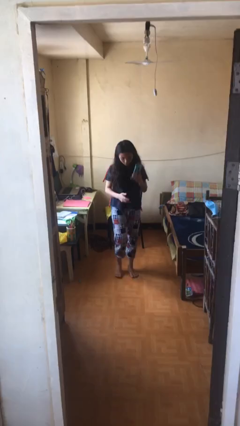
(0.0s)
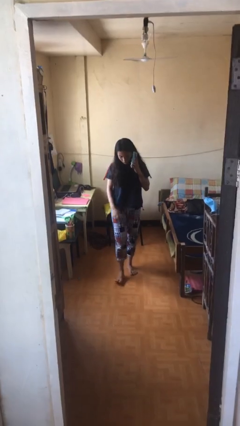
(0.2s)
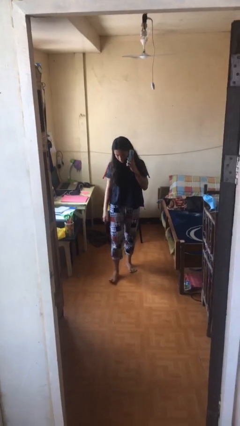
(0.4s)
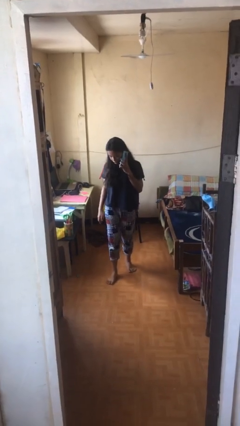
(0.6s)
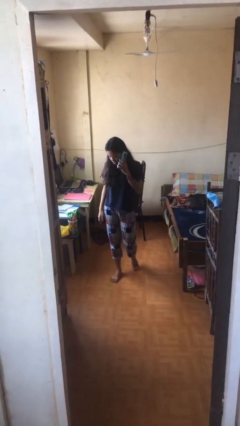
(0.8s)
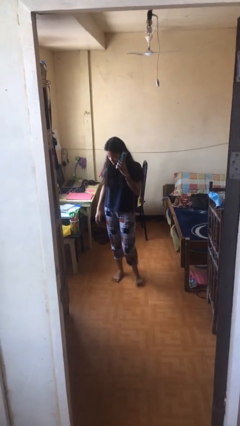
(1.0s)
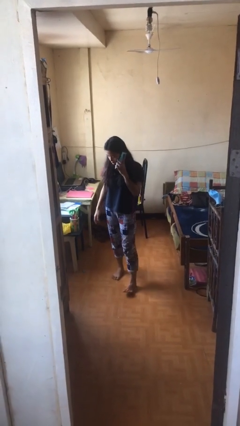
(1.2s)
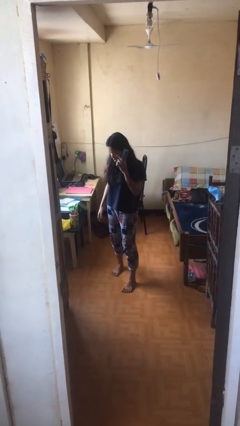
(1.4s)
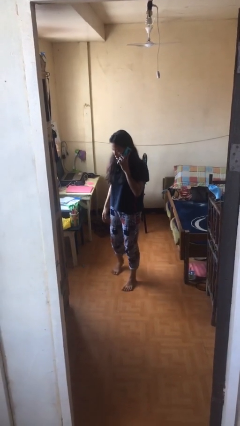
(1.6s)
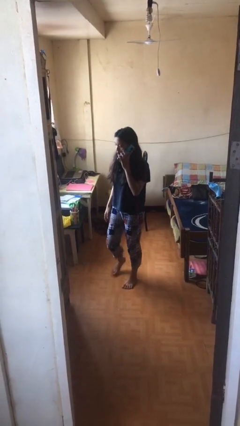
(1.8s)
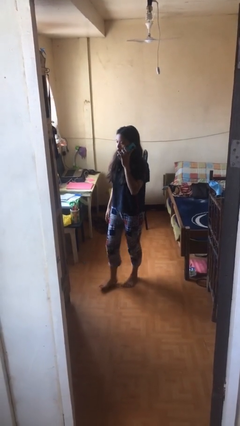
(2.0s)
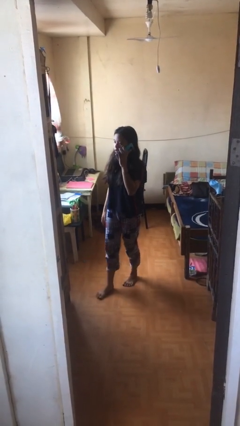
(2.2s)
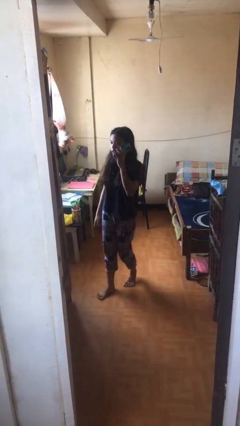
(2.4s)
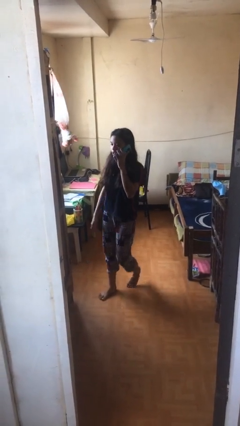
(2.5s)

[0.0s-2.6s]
person talks on phone

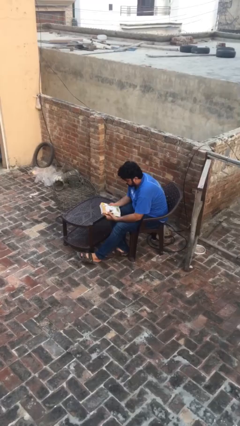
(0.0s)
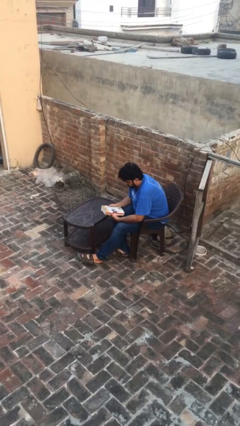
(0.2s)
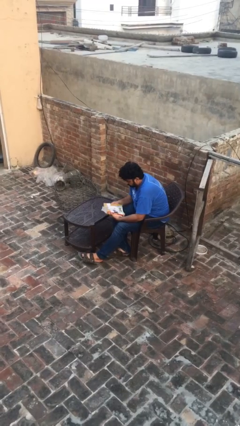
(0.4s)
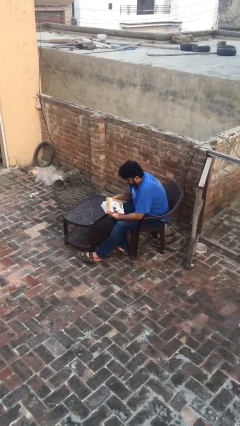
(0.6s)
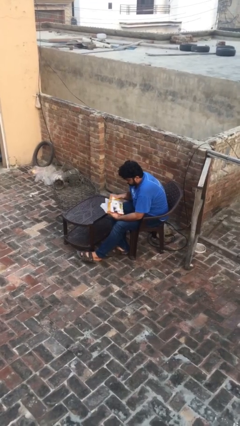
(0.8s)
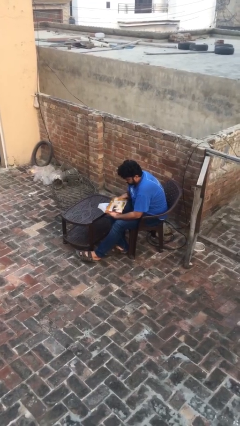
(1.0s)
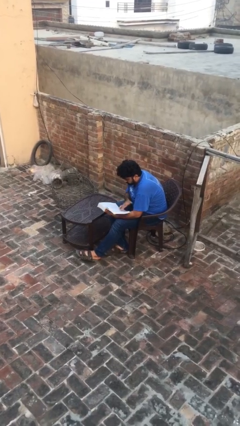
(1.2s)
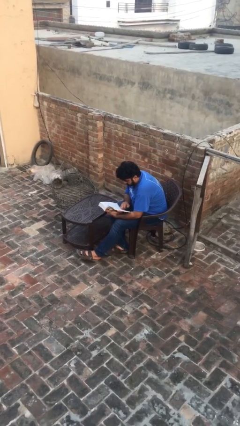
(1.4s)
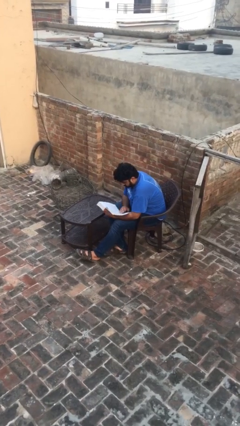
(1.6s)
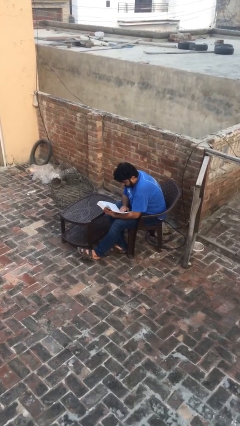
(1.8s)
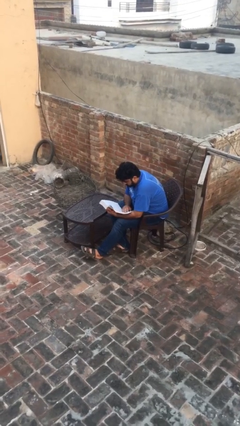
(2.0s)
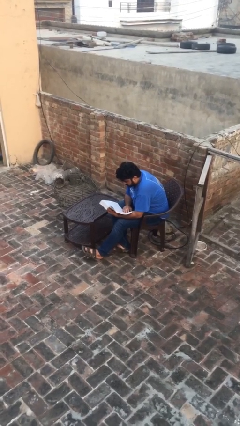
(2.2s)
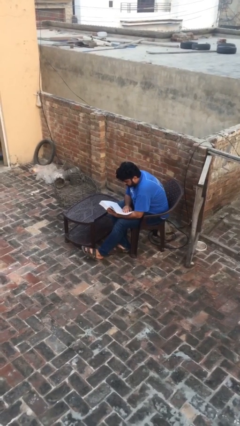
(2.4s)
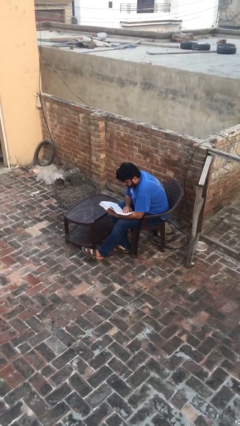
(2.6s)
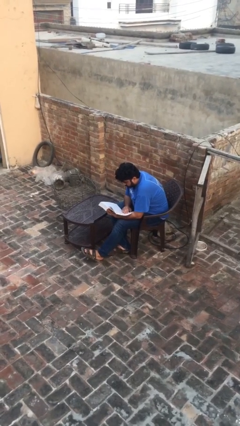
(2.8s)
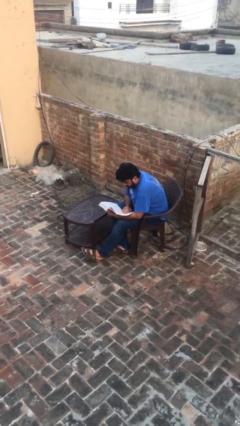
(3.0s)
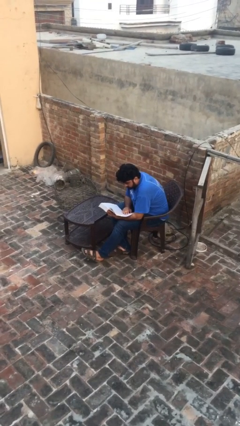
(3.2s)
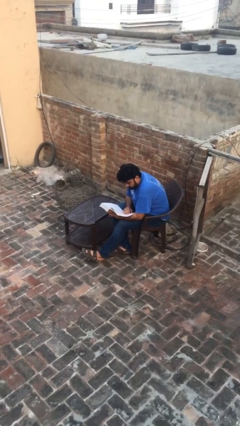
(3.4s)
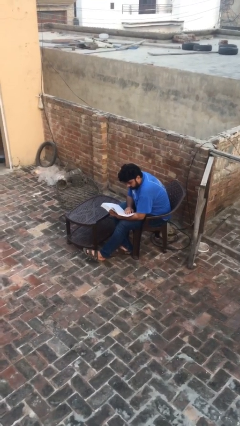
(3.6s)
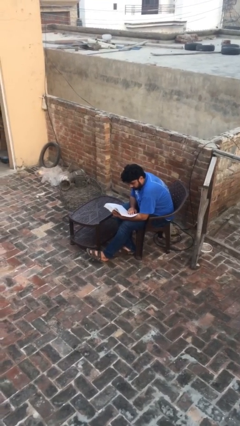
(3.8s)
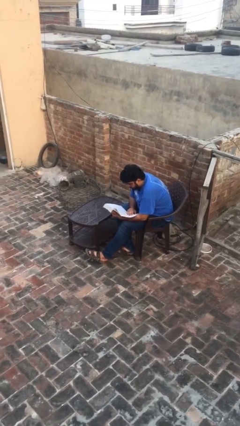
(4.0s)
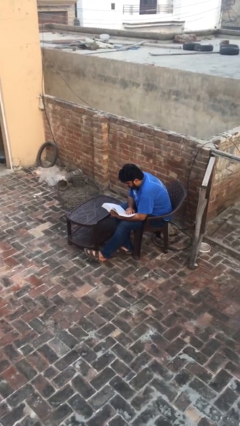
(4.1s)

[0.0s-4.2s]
person reads document

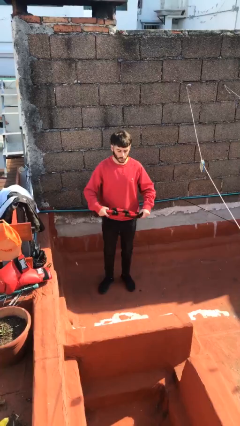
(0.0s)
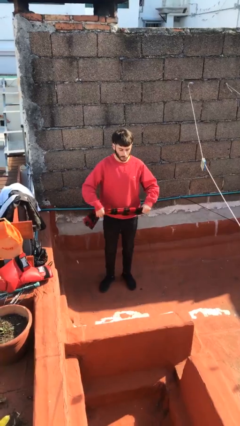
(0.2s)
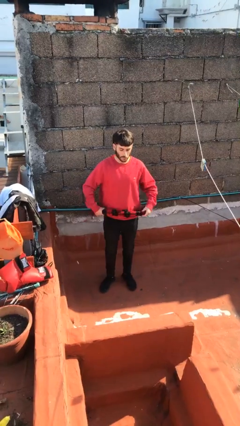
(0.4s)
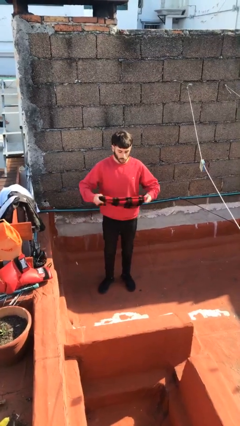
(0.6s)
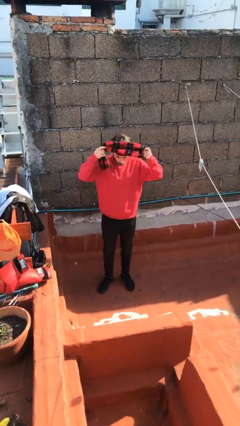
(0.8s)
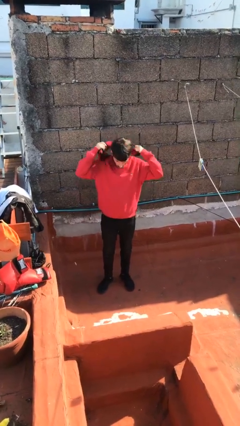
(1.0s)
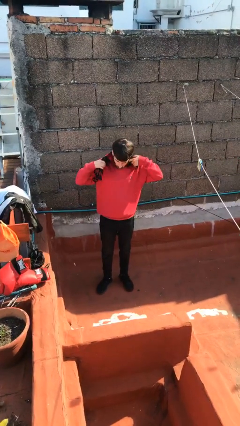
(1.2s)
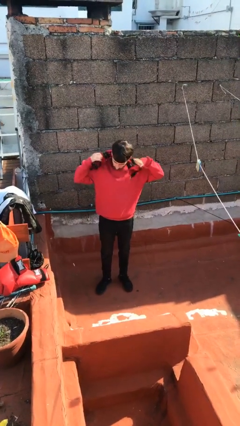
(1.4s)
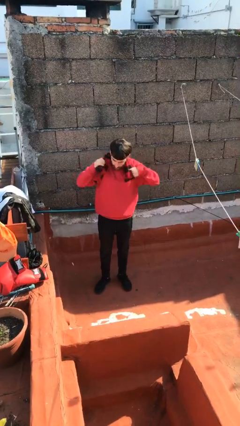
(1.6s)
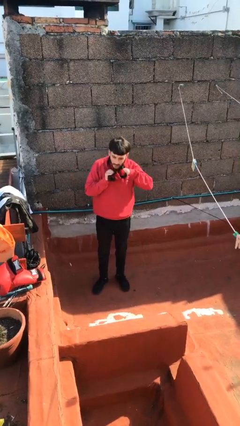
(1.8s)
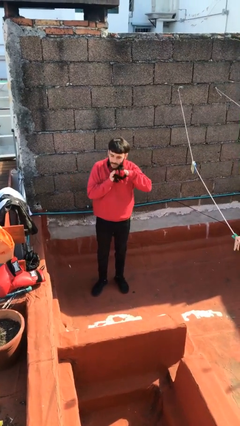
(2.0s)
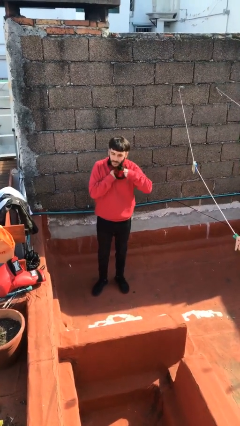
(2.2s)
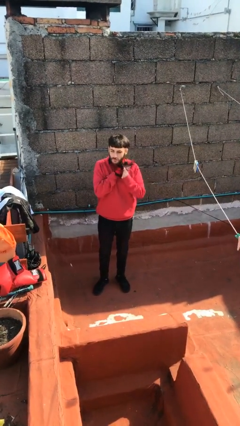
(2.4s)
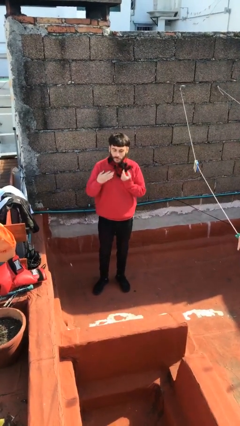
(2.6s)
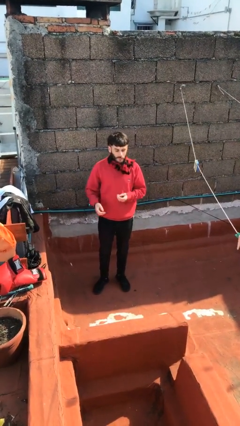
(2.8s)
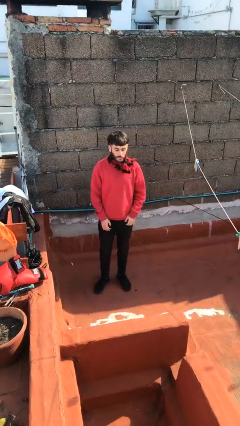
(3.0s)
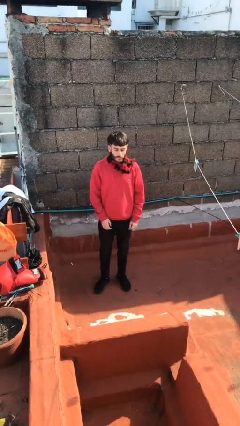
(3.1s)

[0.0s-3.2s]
person puts on scarf

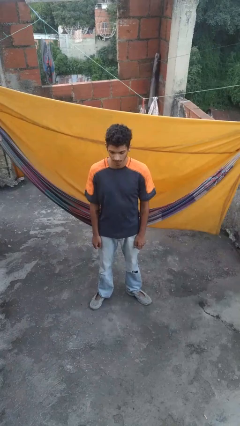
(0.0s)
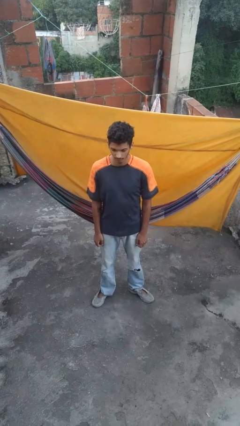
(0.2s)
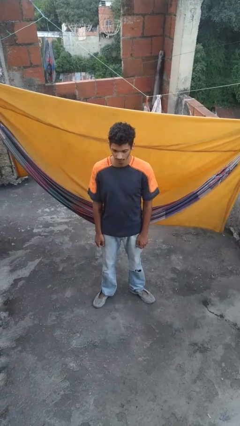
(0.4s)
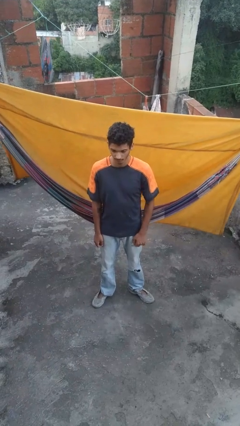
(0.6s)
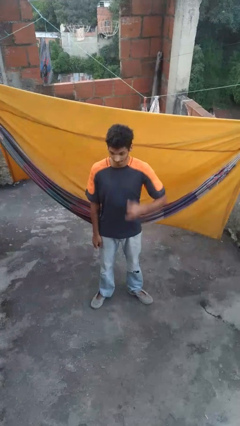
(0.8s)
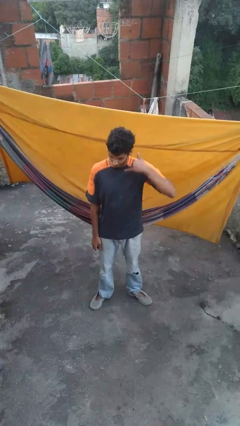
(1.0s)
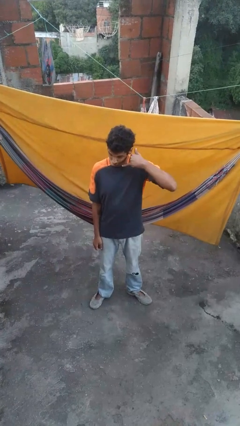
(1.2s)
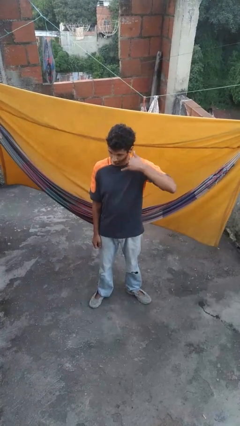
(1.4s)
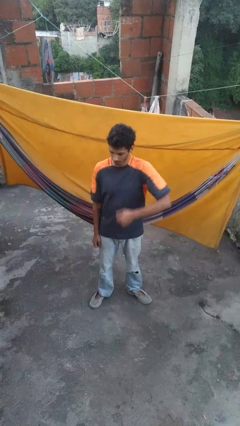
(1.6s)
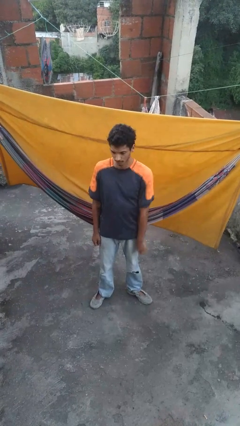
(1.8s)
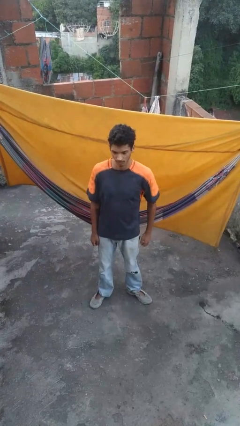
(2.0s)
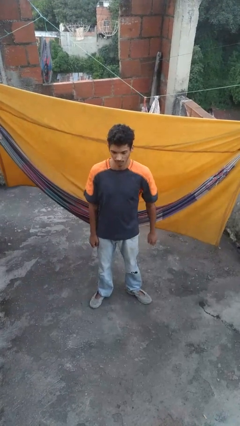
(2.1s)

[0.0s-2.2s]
person gestures call me

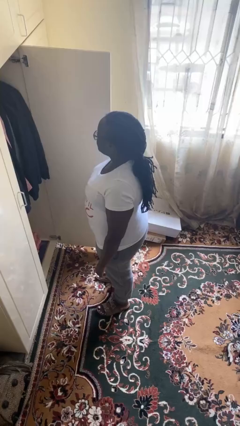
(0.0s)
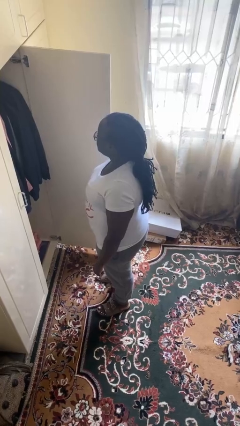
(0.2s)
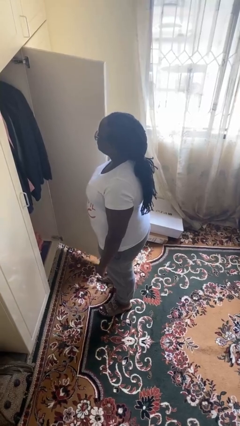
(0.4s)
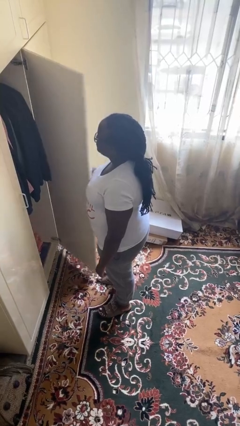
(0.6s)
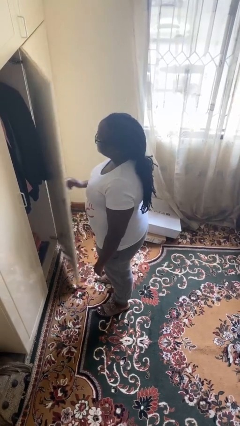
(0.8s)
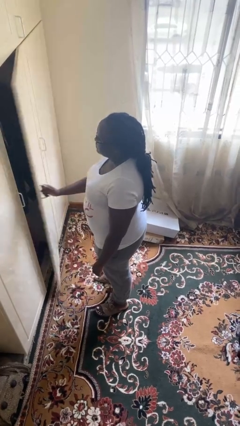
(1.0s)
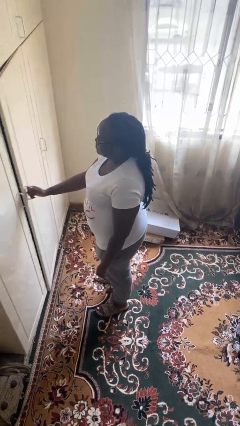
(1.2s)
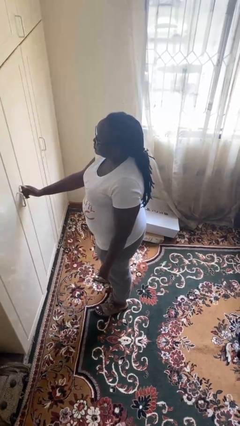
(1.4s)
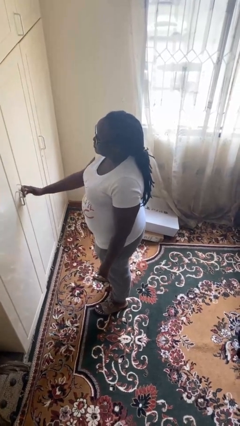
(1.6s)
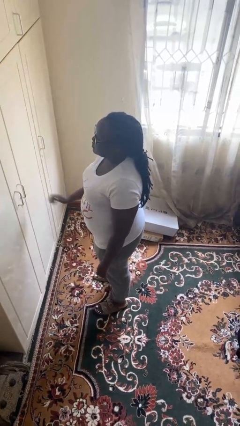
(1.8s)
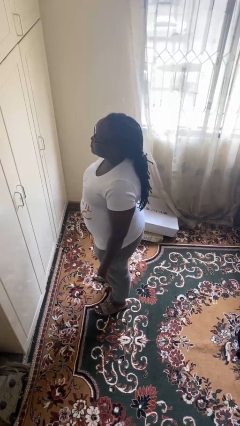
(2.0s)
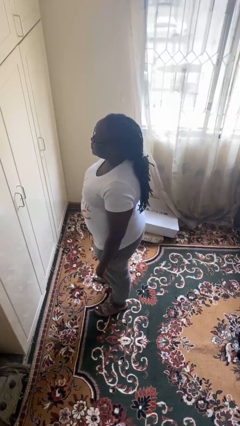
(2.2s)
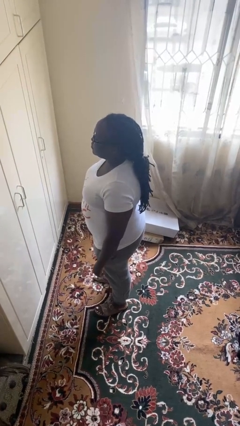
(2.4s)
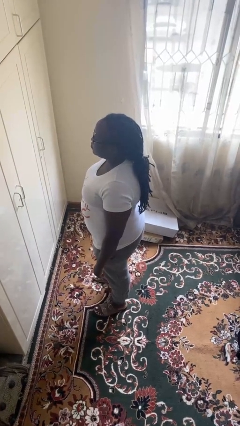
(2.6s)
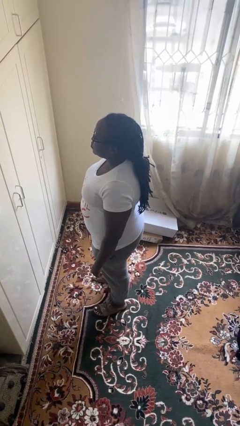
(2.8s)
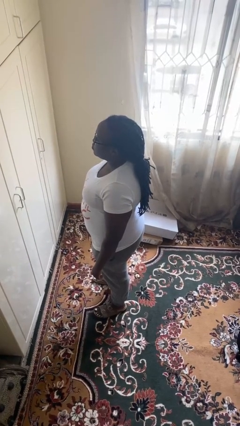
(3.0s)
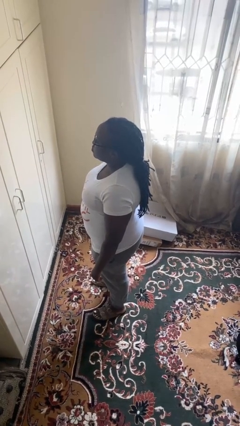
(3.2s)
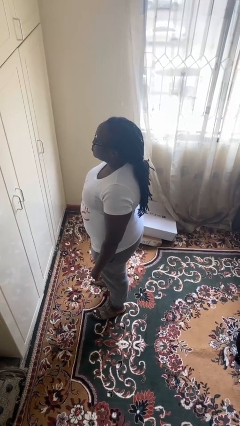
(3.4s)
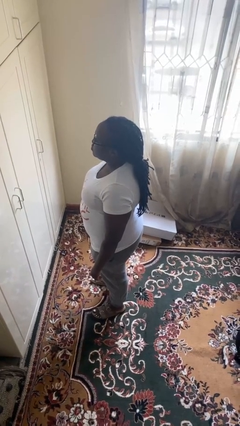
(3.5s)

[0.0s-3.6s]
person closes closet door

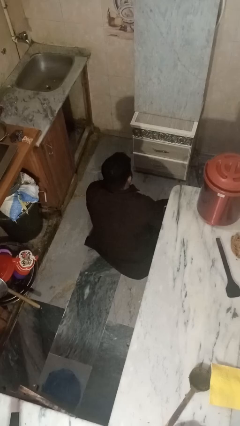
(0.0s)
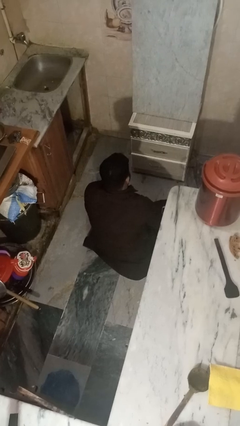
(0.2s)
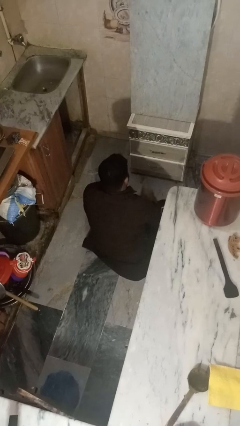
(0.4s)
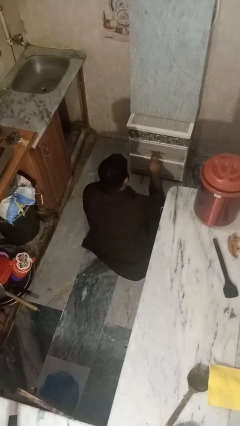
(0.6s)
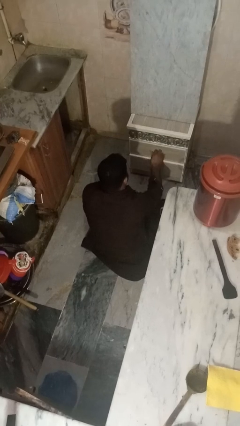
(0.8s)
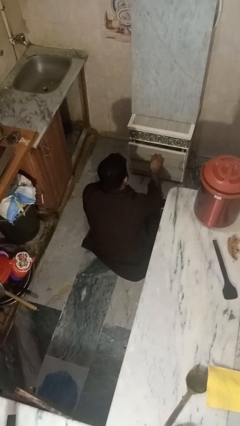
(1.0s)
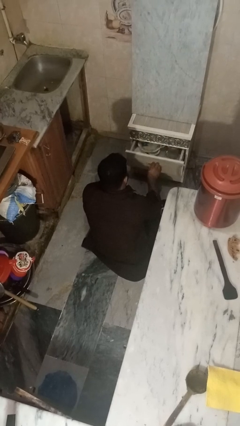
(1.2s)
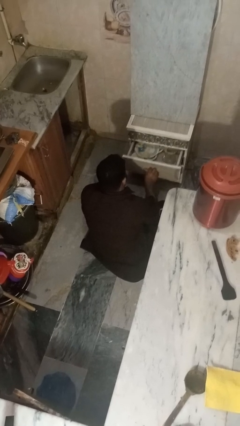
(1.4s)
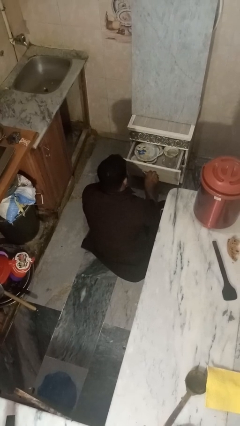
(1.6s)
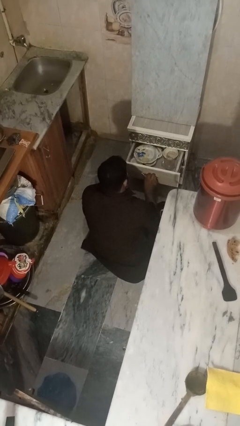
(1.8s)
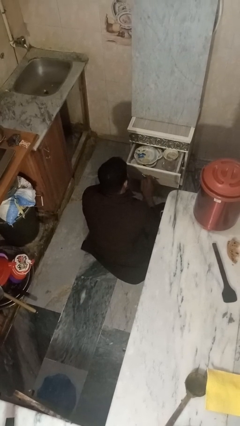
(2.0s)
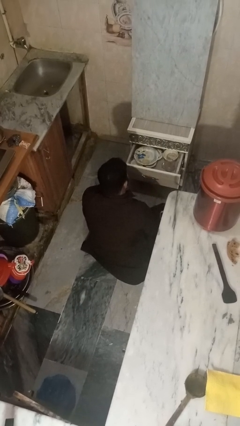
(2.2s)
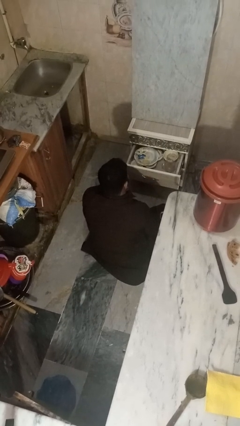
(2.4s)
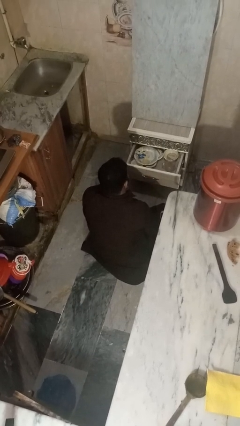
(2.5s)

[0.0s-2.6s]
person opens kitchen drawer
